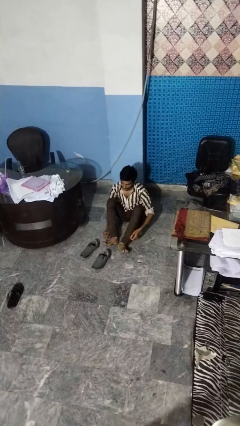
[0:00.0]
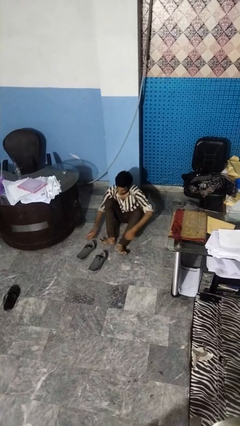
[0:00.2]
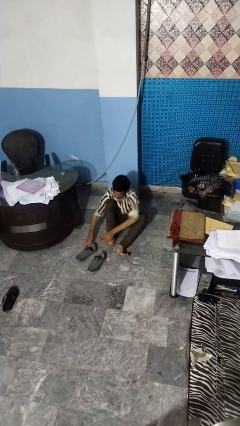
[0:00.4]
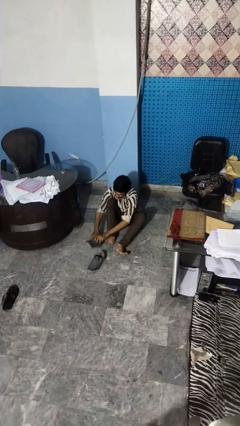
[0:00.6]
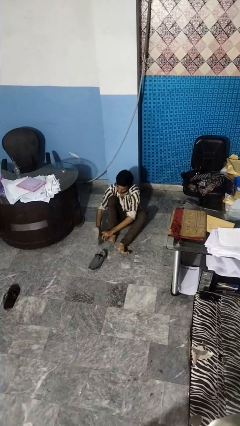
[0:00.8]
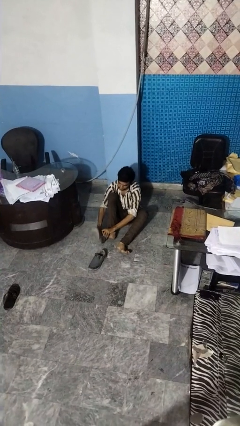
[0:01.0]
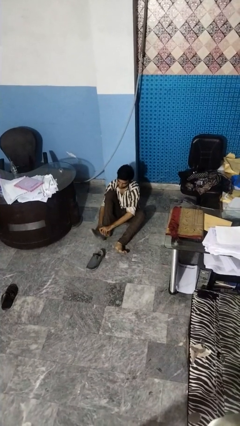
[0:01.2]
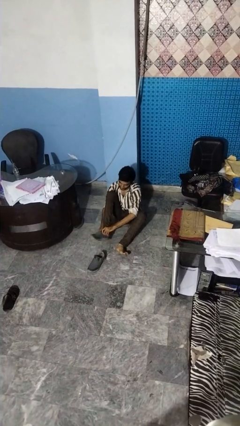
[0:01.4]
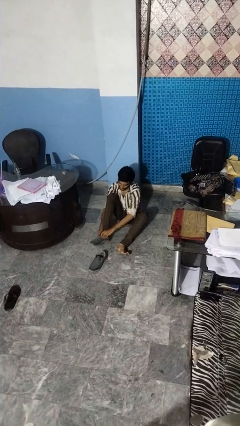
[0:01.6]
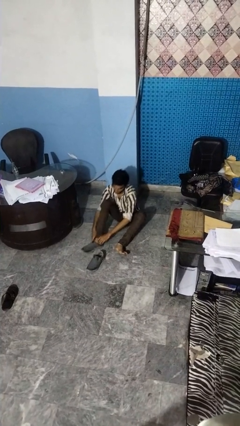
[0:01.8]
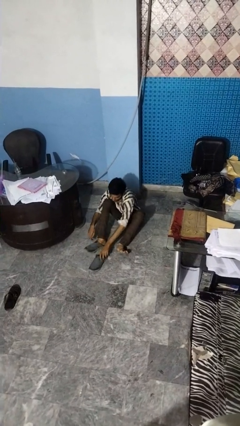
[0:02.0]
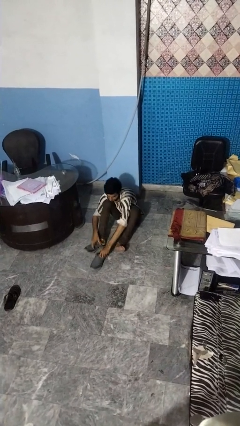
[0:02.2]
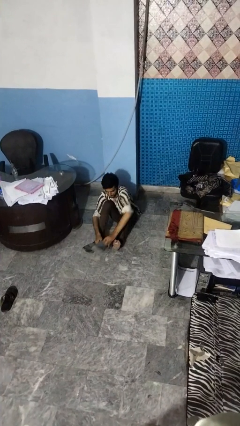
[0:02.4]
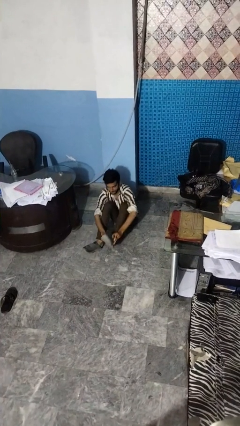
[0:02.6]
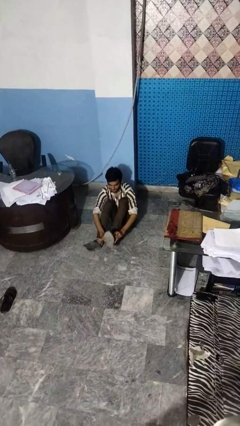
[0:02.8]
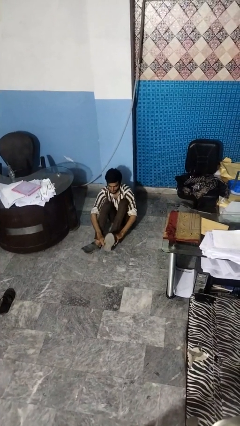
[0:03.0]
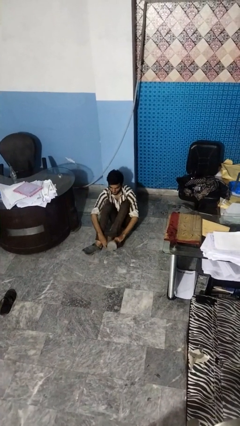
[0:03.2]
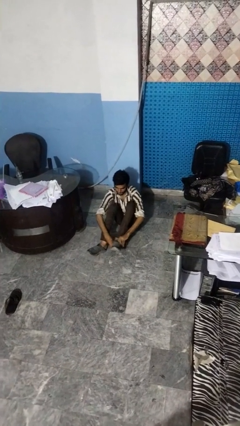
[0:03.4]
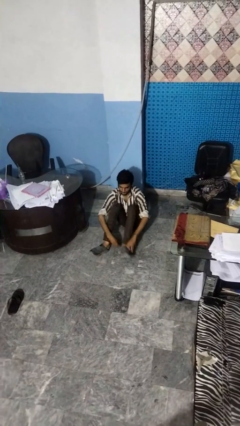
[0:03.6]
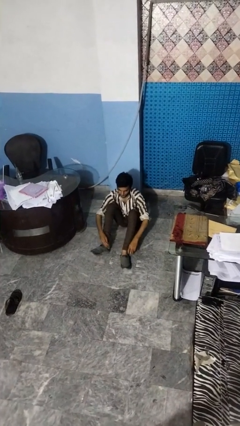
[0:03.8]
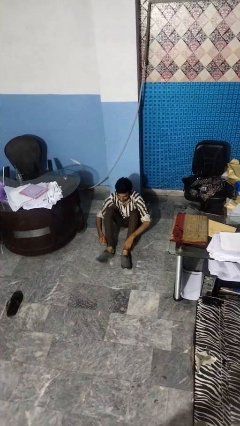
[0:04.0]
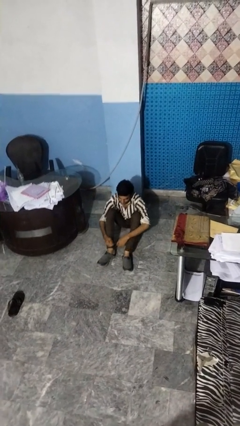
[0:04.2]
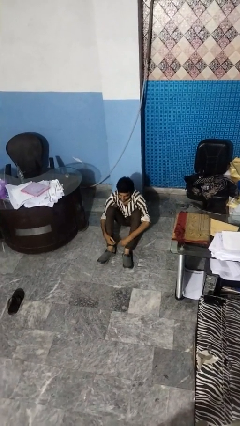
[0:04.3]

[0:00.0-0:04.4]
person puts on shoes

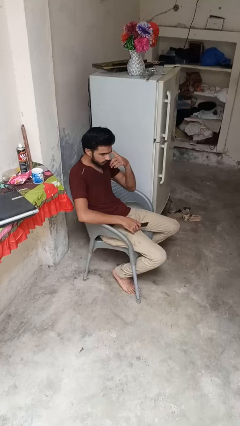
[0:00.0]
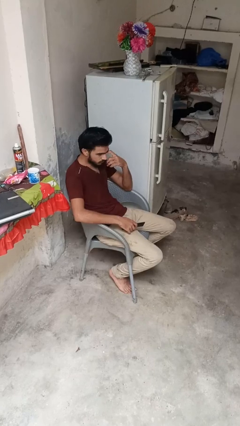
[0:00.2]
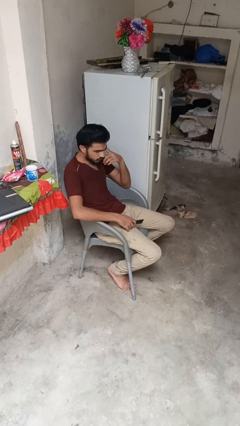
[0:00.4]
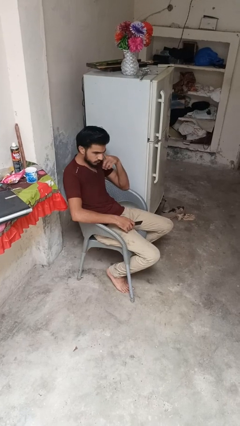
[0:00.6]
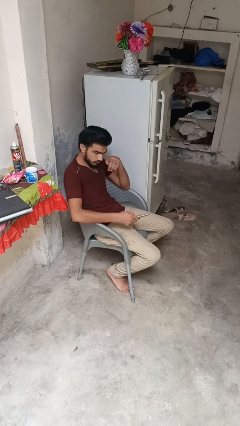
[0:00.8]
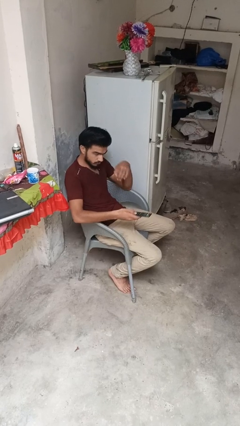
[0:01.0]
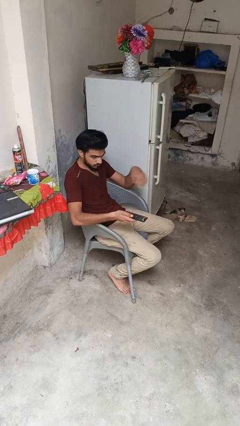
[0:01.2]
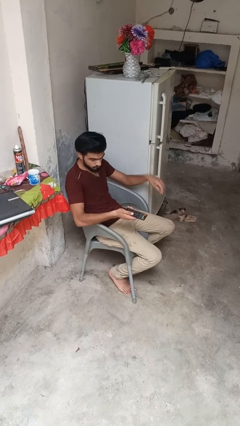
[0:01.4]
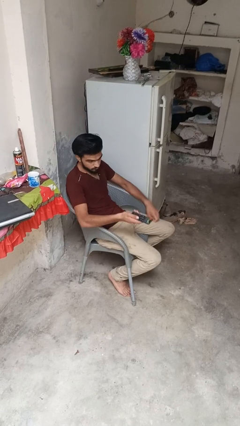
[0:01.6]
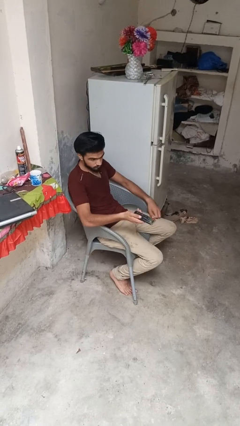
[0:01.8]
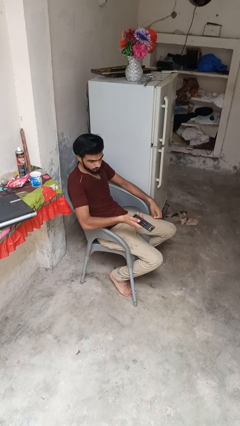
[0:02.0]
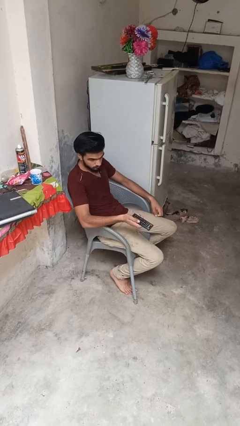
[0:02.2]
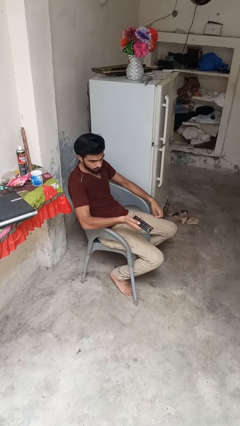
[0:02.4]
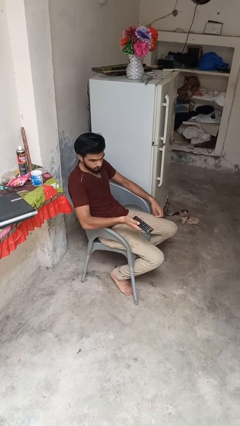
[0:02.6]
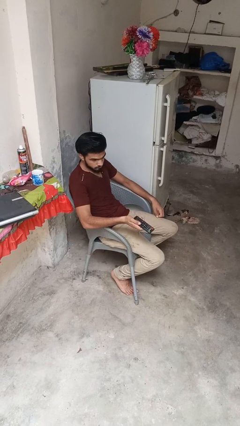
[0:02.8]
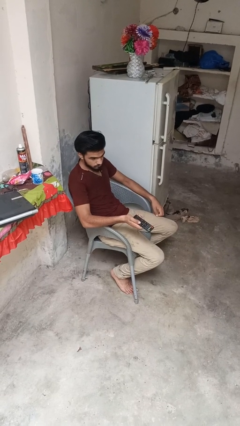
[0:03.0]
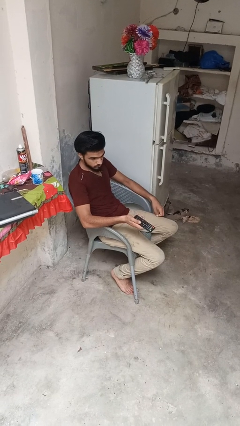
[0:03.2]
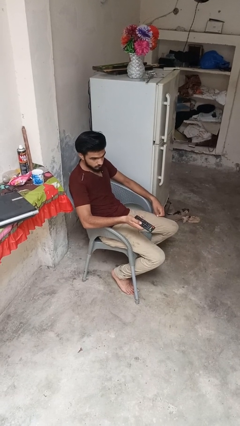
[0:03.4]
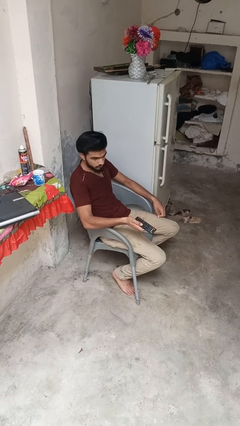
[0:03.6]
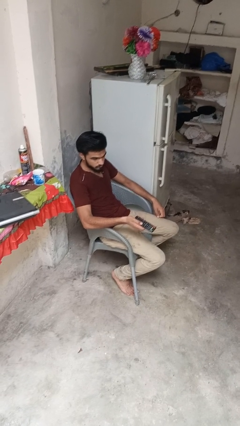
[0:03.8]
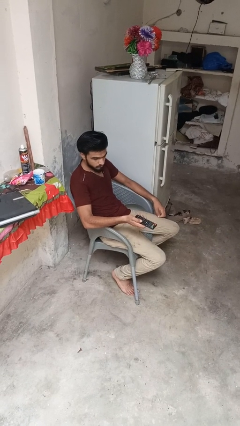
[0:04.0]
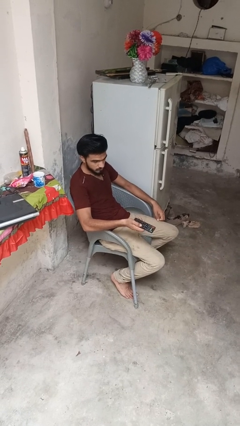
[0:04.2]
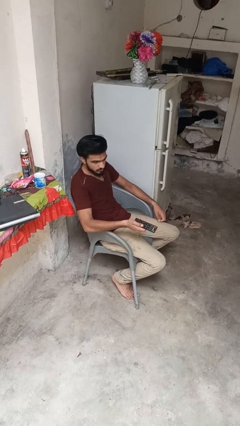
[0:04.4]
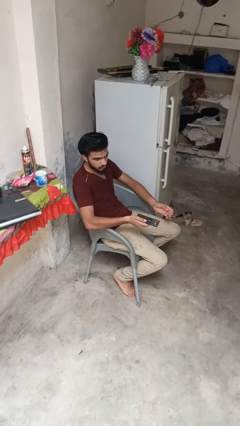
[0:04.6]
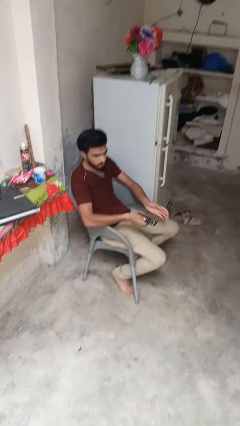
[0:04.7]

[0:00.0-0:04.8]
person uses television remote

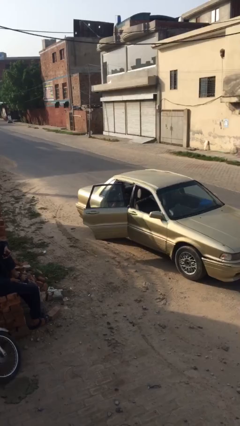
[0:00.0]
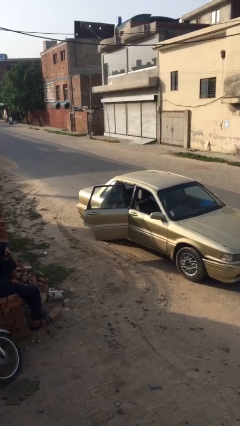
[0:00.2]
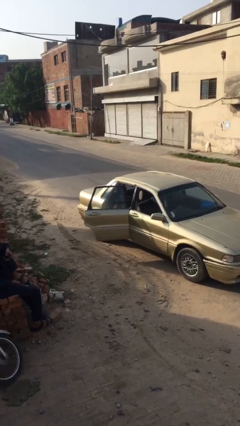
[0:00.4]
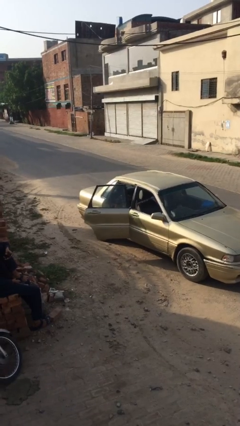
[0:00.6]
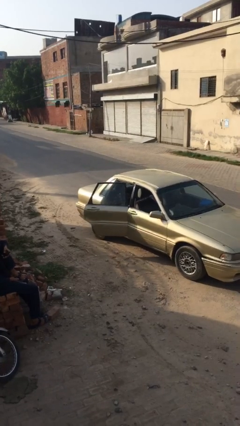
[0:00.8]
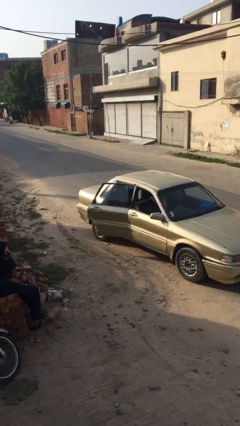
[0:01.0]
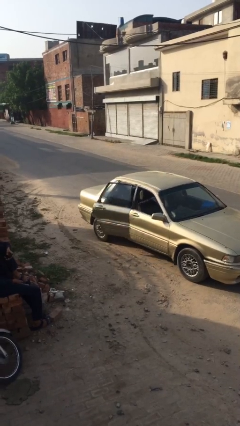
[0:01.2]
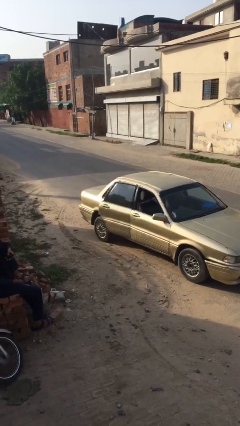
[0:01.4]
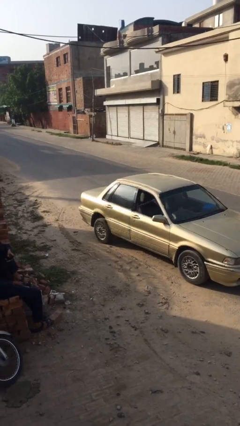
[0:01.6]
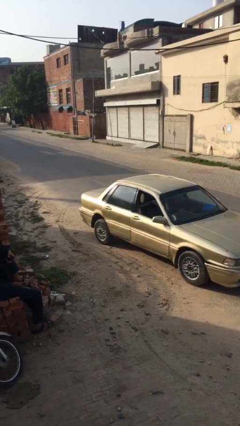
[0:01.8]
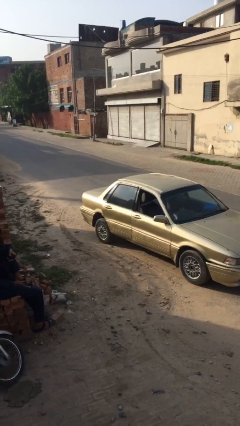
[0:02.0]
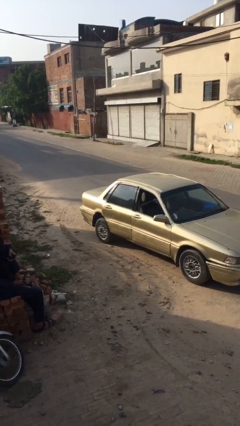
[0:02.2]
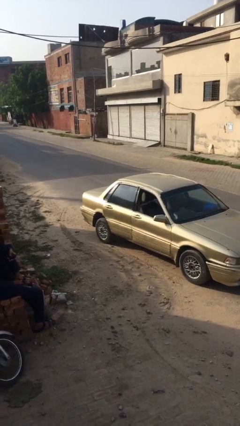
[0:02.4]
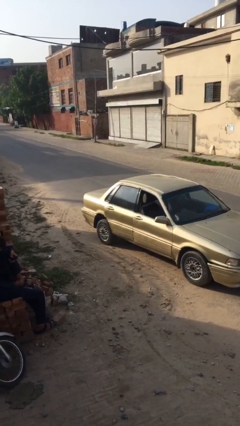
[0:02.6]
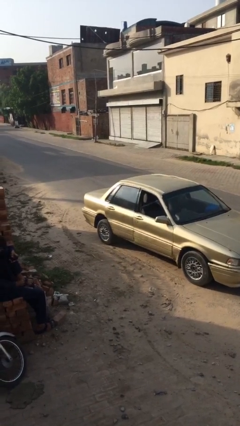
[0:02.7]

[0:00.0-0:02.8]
person closes car door

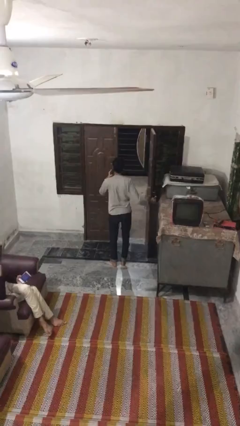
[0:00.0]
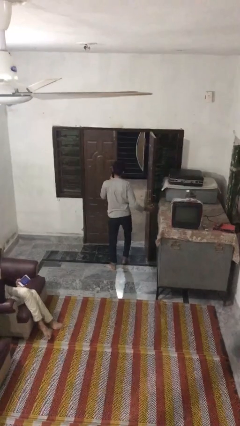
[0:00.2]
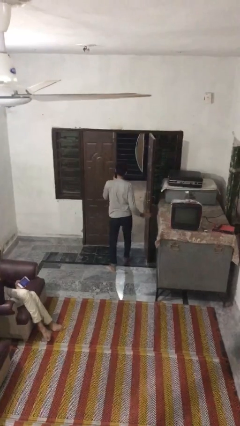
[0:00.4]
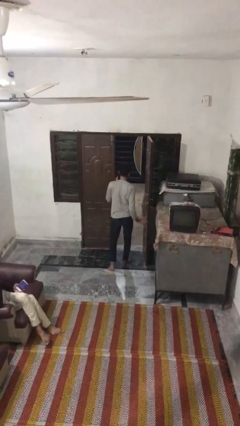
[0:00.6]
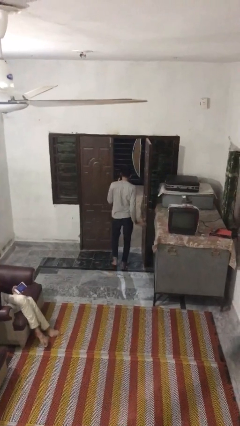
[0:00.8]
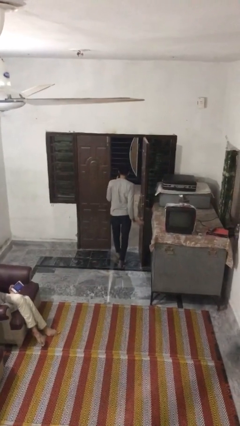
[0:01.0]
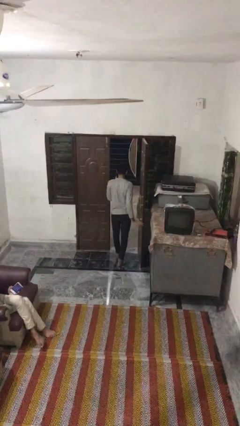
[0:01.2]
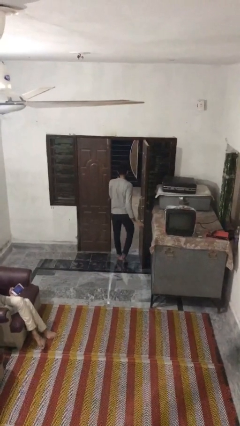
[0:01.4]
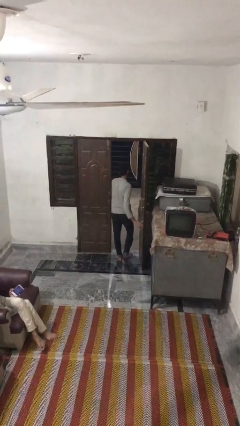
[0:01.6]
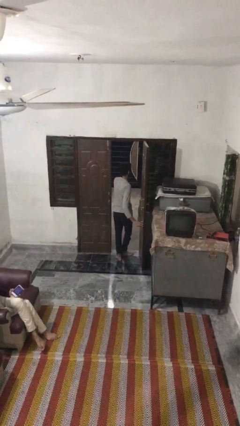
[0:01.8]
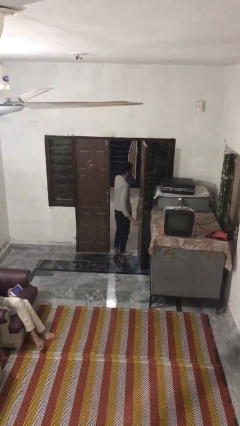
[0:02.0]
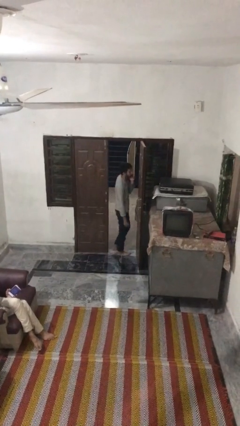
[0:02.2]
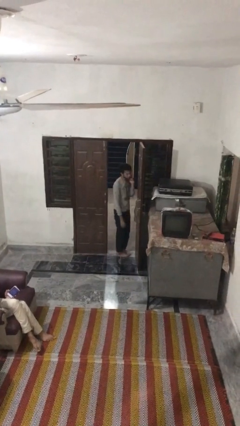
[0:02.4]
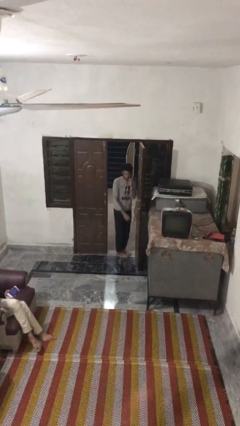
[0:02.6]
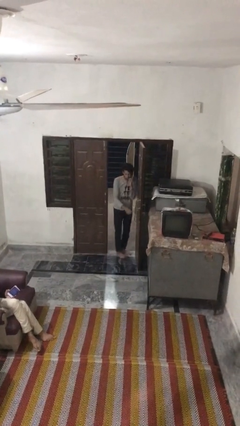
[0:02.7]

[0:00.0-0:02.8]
person exits scene through structure

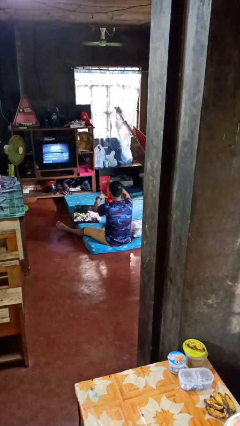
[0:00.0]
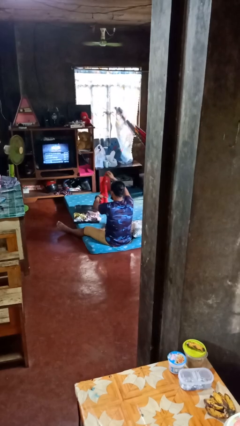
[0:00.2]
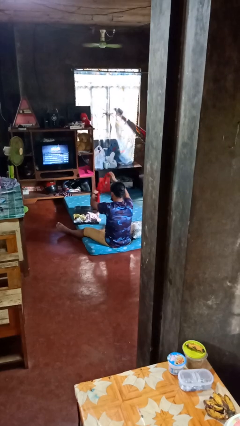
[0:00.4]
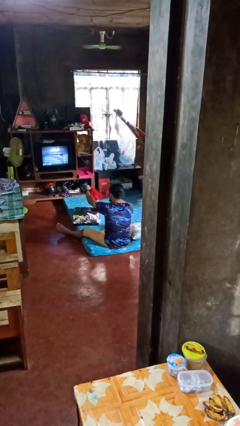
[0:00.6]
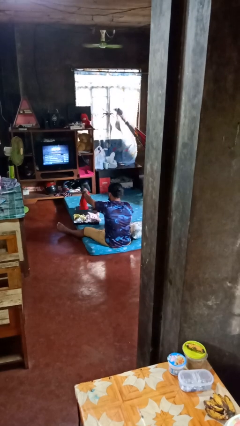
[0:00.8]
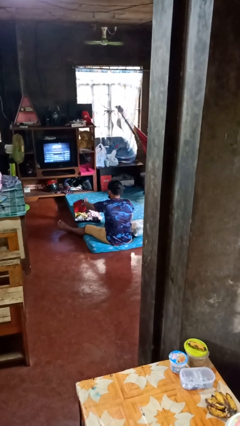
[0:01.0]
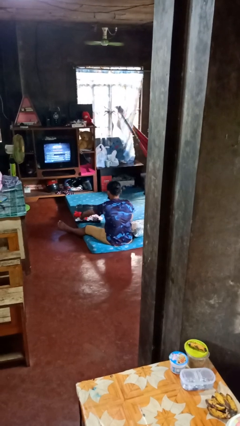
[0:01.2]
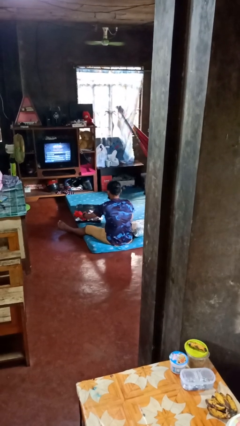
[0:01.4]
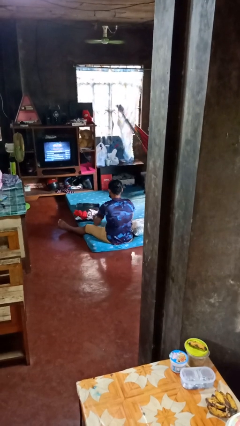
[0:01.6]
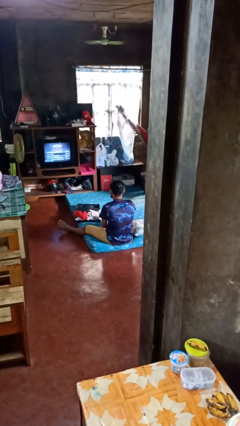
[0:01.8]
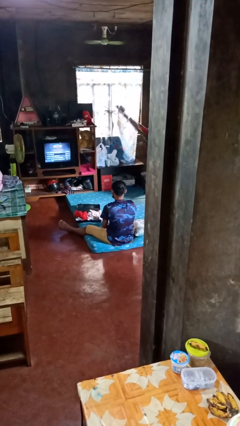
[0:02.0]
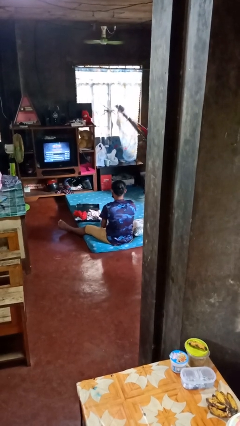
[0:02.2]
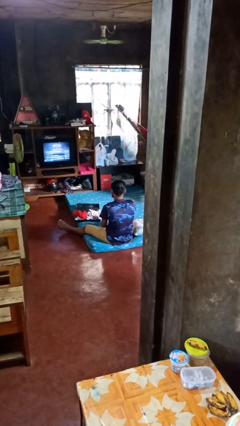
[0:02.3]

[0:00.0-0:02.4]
person loads clothes into suitcase

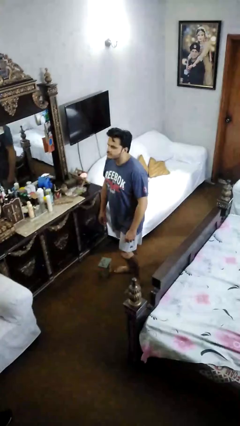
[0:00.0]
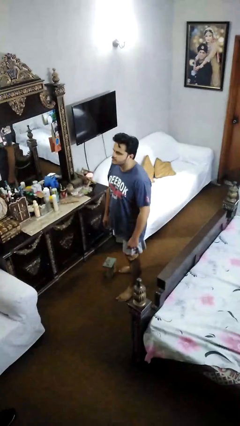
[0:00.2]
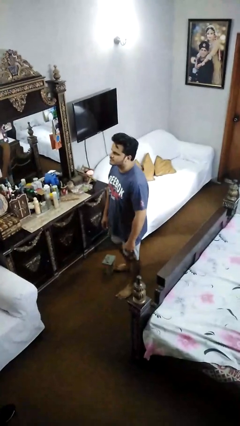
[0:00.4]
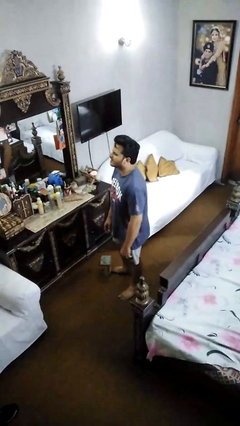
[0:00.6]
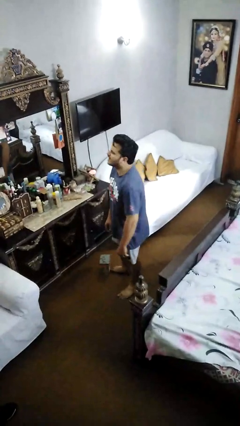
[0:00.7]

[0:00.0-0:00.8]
person trips on object on floor
